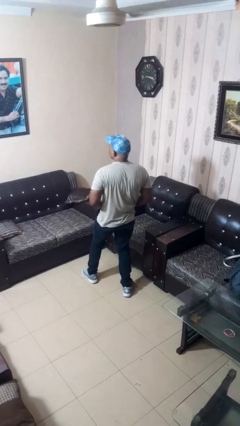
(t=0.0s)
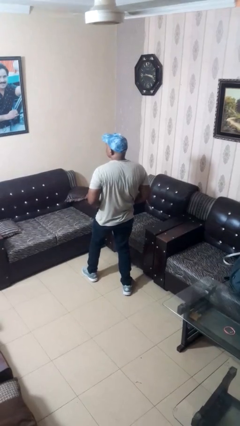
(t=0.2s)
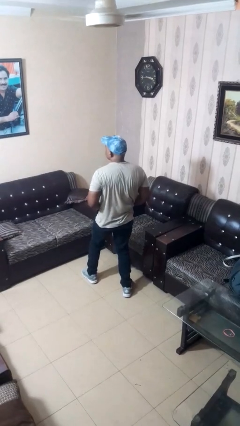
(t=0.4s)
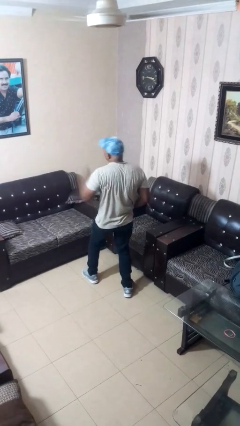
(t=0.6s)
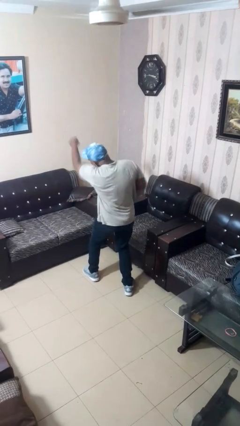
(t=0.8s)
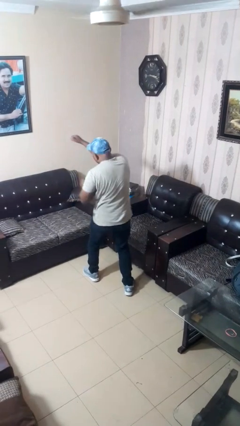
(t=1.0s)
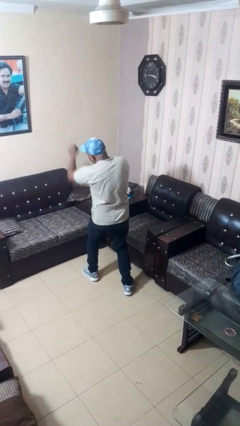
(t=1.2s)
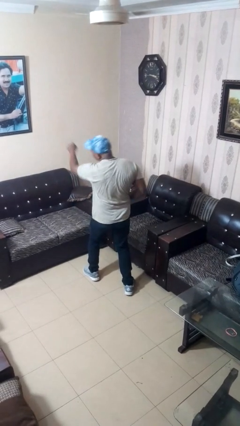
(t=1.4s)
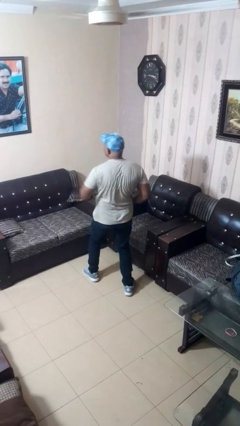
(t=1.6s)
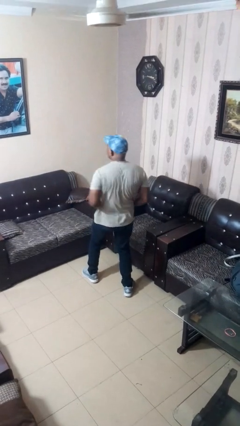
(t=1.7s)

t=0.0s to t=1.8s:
person punches

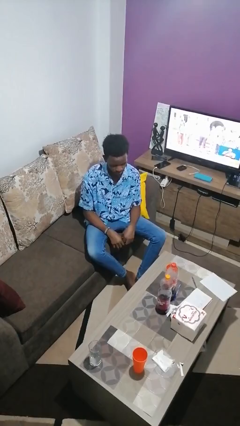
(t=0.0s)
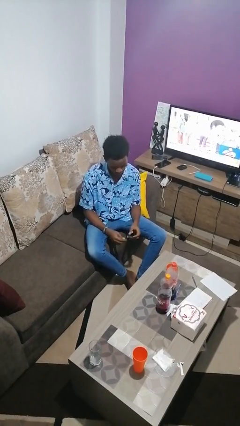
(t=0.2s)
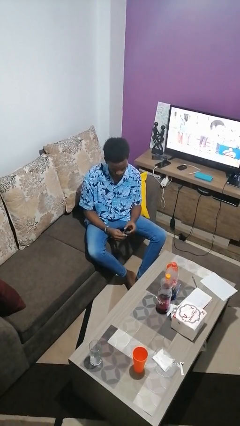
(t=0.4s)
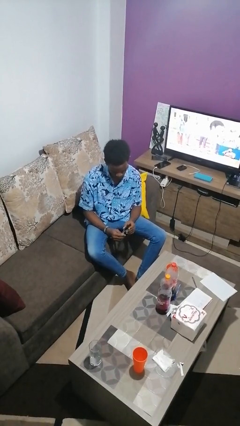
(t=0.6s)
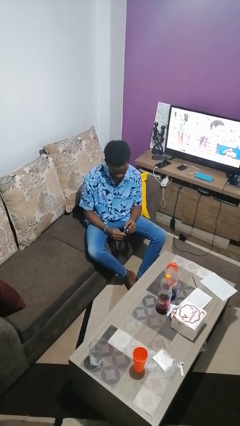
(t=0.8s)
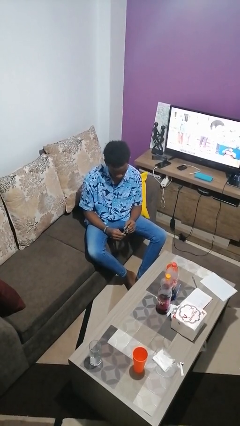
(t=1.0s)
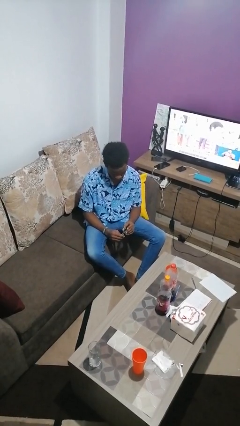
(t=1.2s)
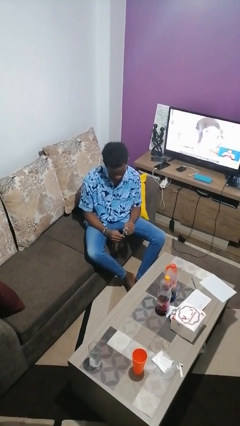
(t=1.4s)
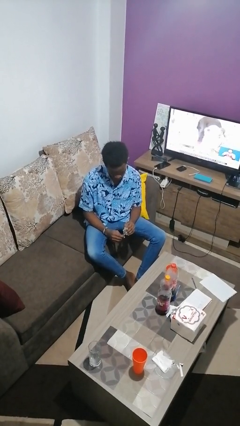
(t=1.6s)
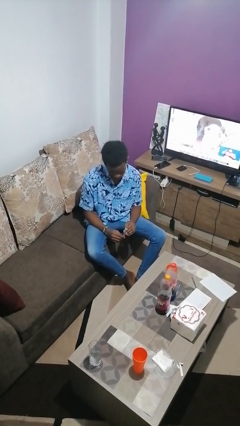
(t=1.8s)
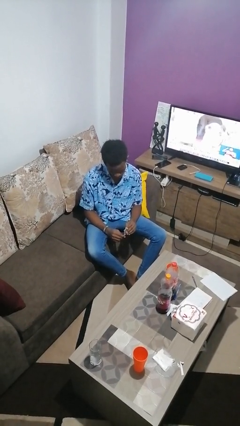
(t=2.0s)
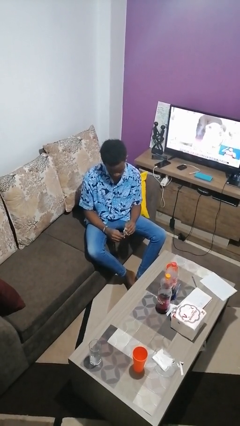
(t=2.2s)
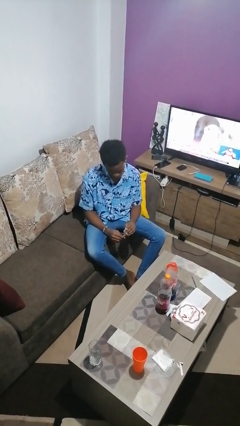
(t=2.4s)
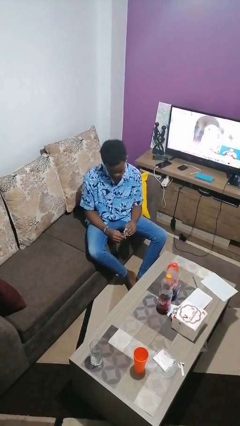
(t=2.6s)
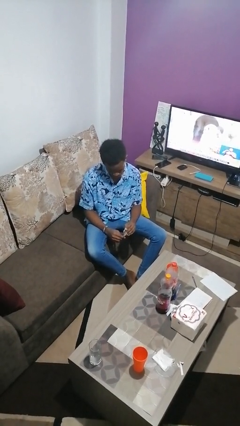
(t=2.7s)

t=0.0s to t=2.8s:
person clips fingernails

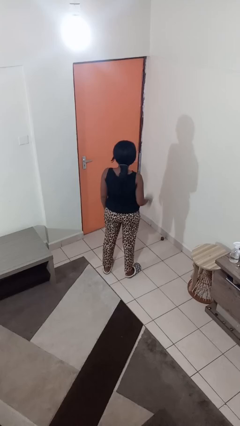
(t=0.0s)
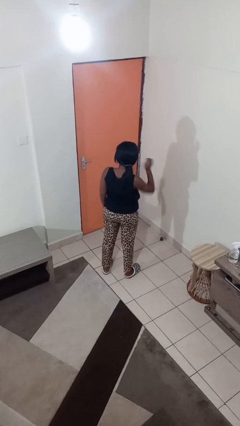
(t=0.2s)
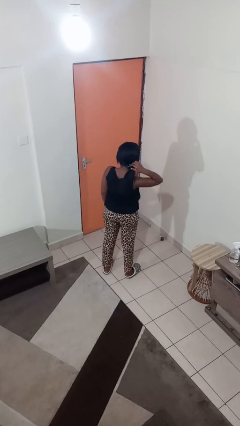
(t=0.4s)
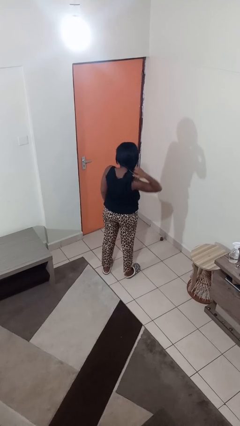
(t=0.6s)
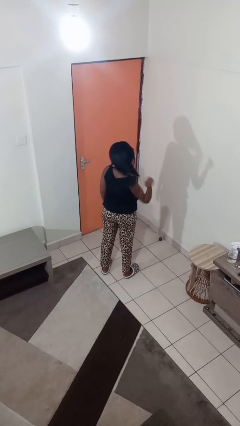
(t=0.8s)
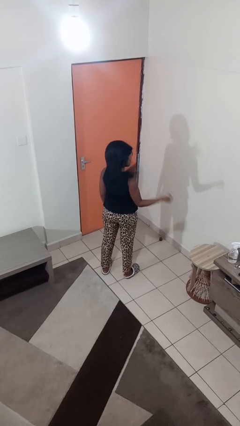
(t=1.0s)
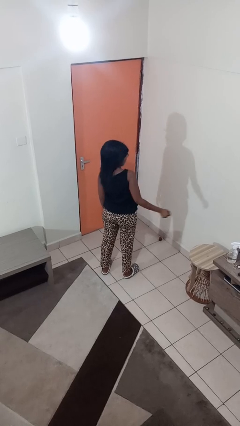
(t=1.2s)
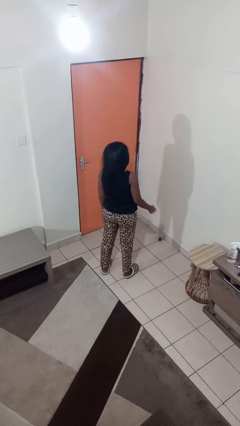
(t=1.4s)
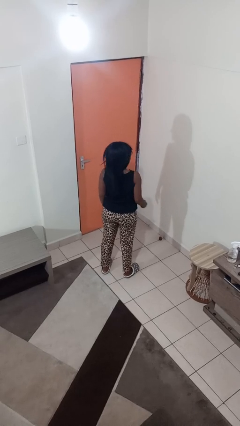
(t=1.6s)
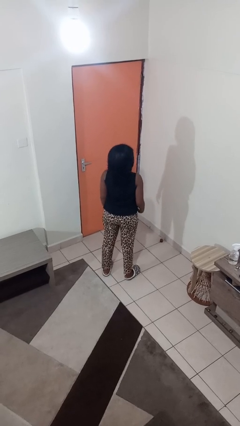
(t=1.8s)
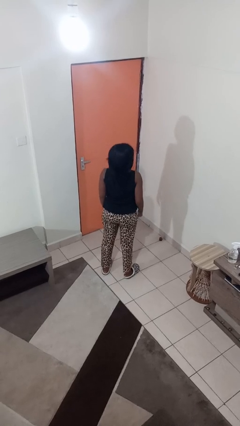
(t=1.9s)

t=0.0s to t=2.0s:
person takes off hairtie

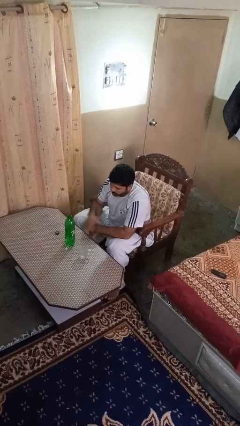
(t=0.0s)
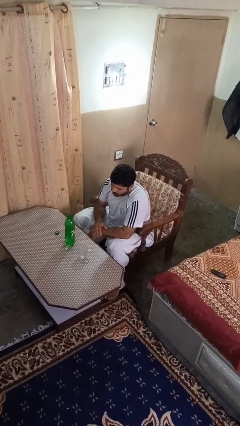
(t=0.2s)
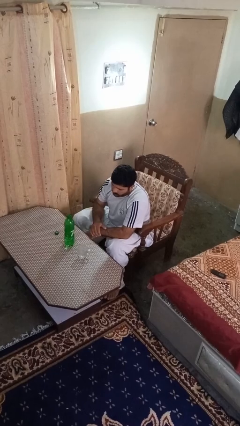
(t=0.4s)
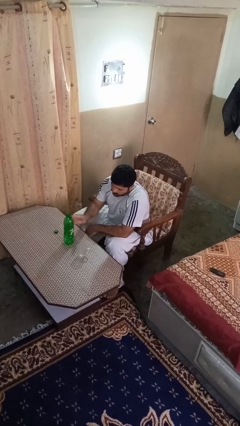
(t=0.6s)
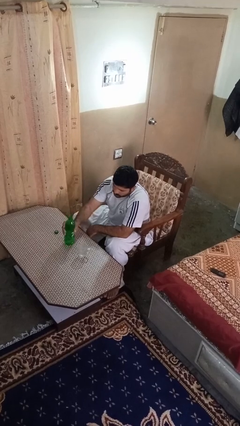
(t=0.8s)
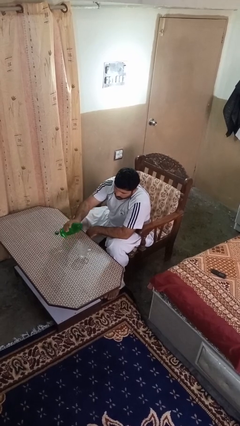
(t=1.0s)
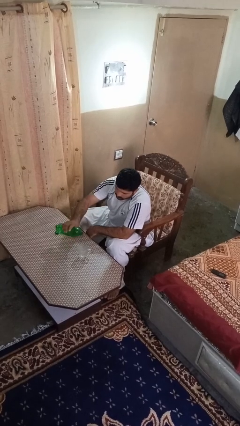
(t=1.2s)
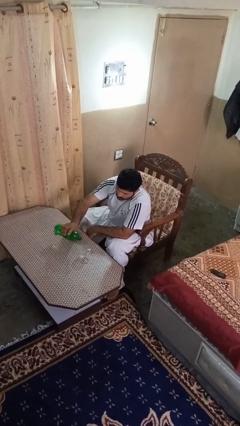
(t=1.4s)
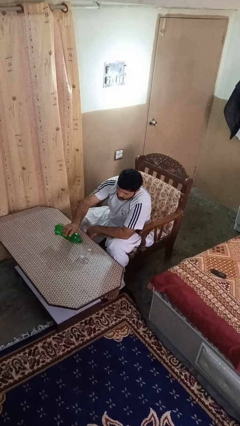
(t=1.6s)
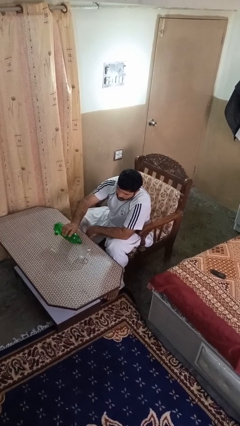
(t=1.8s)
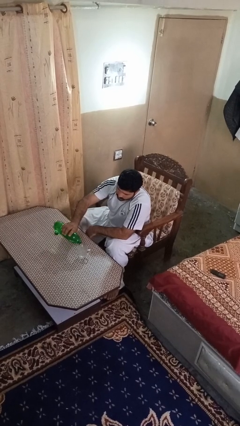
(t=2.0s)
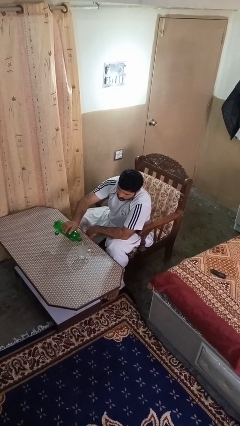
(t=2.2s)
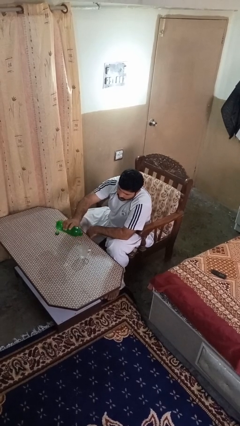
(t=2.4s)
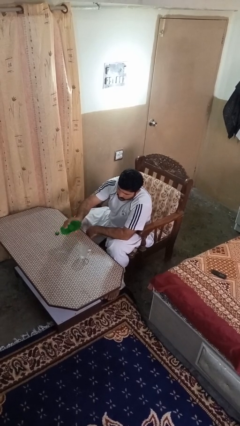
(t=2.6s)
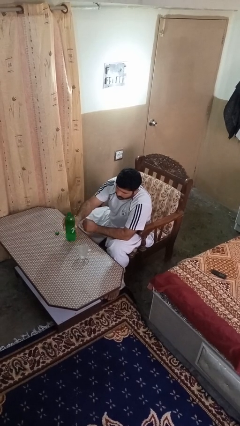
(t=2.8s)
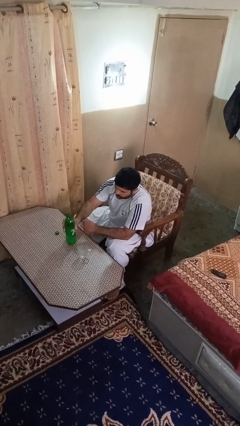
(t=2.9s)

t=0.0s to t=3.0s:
person pours liquid into cup

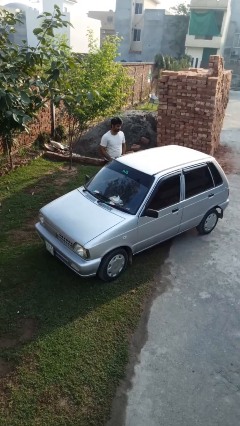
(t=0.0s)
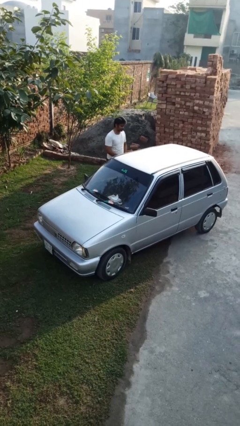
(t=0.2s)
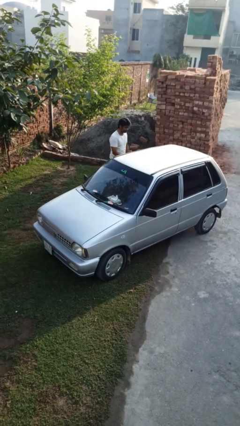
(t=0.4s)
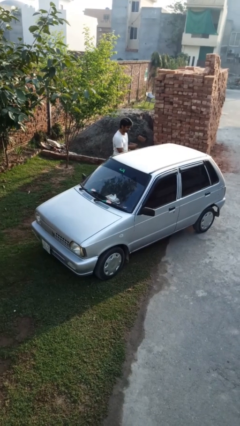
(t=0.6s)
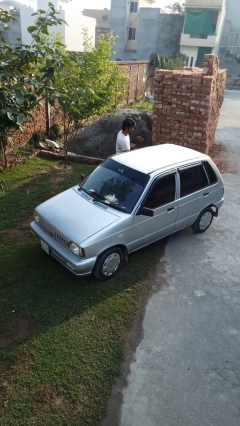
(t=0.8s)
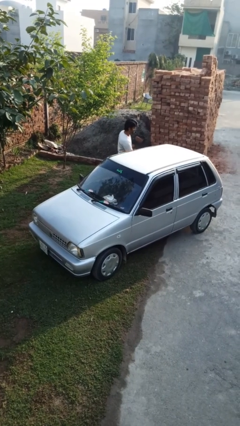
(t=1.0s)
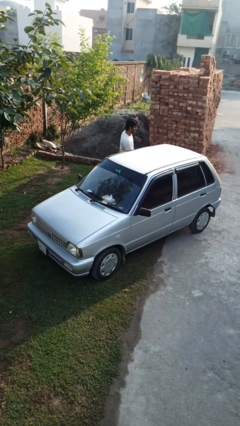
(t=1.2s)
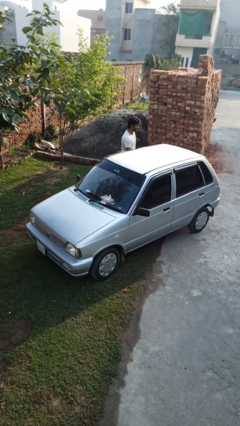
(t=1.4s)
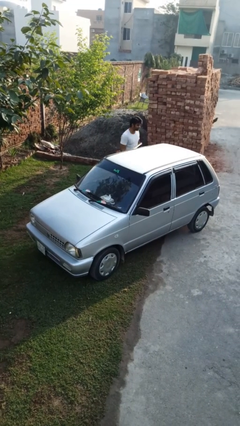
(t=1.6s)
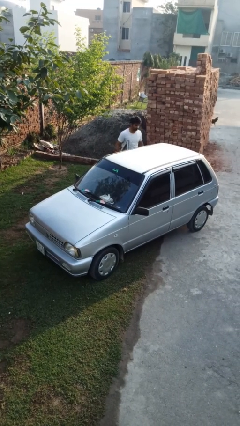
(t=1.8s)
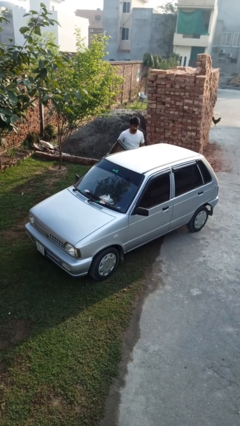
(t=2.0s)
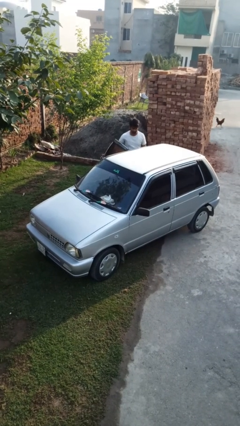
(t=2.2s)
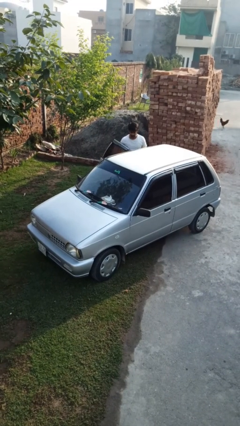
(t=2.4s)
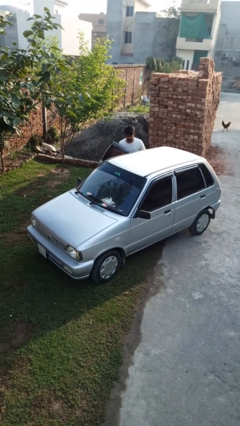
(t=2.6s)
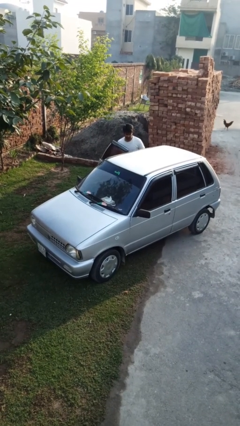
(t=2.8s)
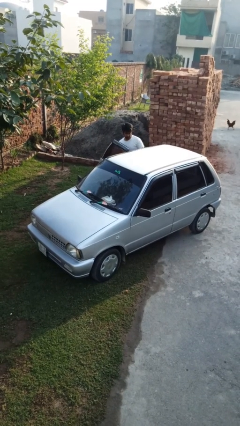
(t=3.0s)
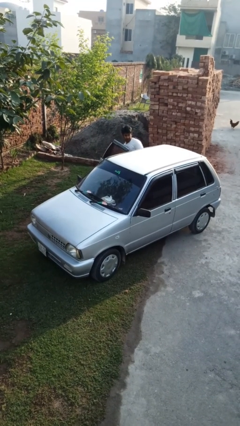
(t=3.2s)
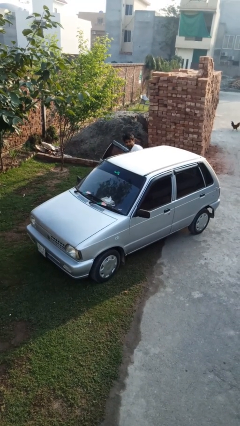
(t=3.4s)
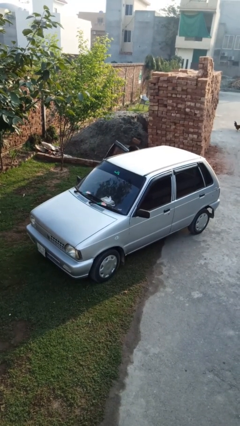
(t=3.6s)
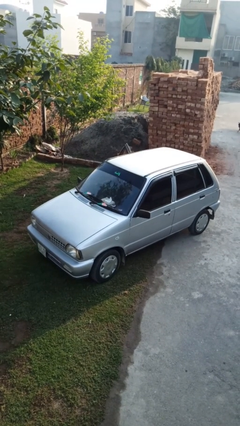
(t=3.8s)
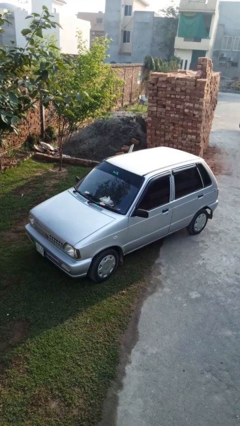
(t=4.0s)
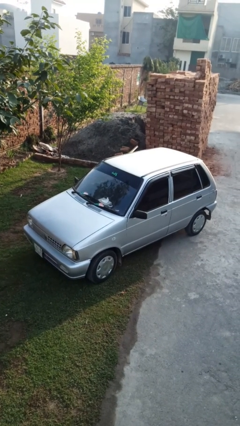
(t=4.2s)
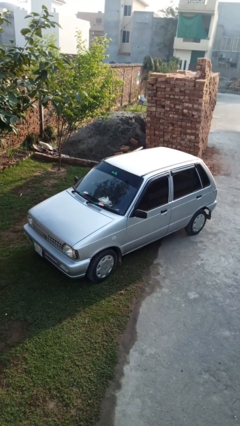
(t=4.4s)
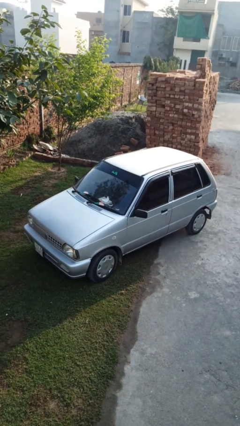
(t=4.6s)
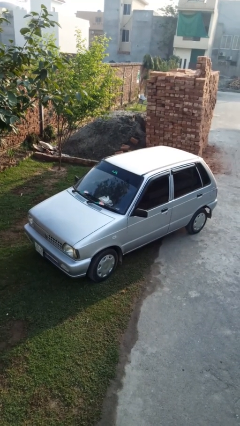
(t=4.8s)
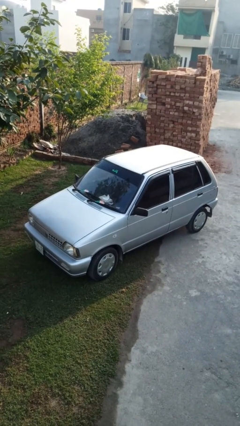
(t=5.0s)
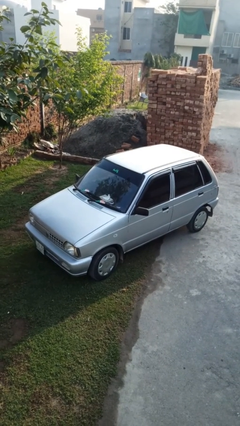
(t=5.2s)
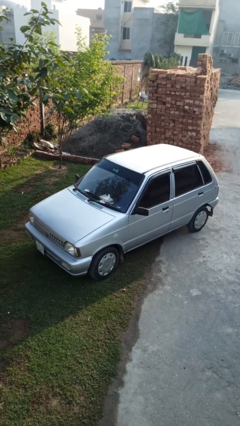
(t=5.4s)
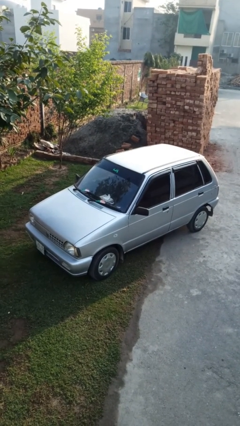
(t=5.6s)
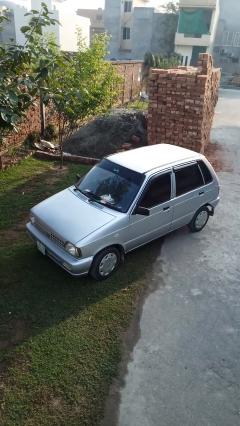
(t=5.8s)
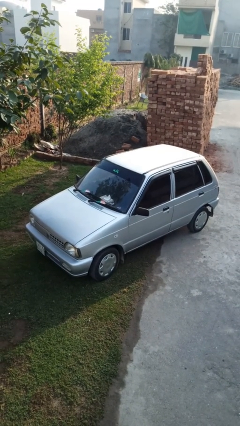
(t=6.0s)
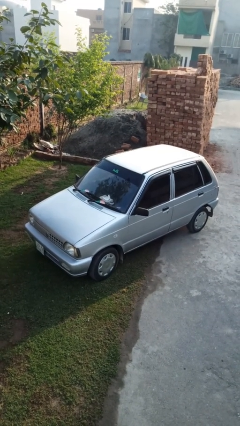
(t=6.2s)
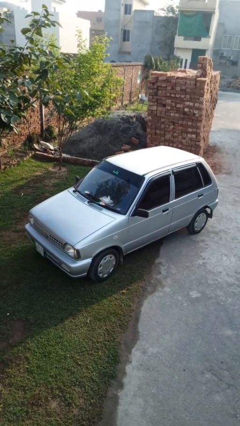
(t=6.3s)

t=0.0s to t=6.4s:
car picks up person

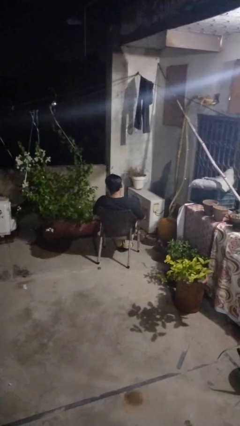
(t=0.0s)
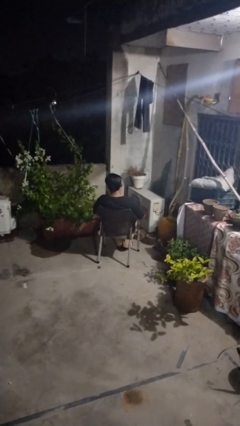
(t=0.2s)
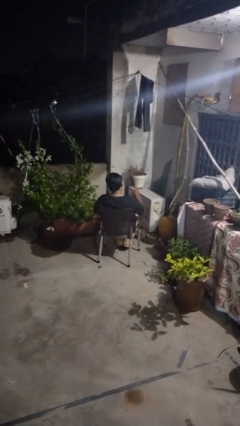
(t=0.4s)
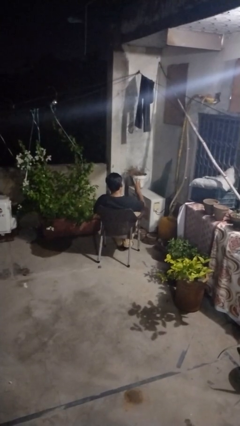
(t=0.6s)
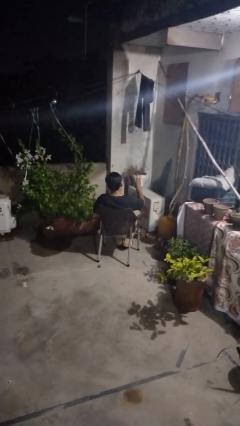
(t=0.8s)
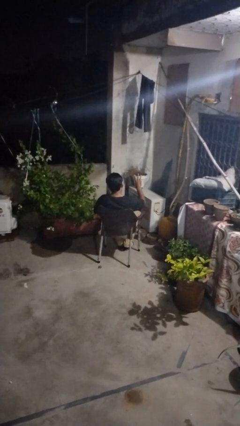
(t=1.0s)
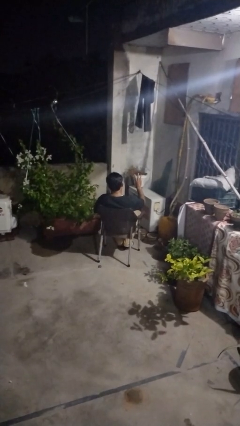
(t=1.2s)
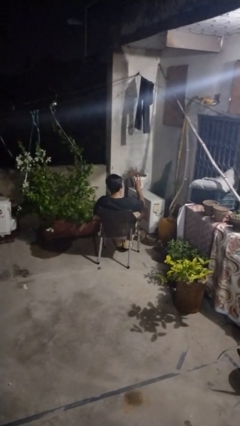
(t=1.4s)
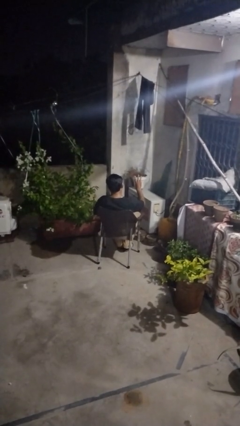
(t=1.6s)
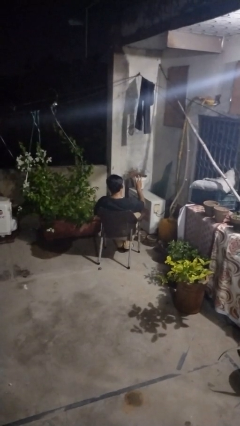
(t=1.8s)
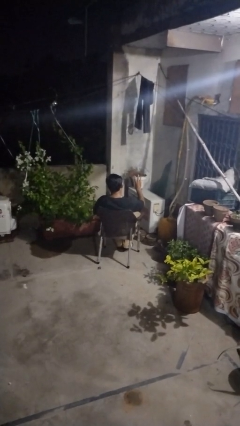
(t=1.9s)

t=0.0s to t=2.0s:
person gestures number three
